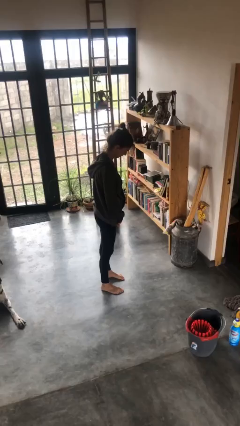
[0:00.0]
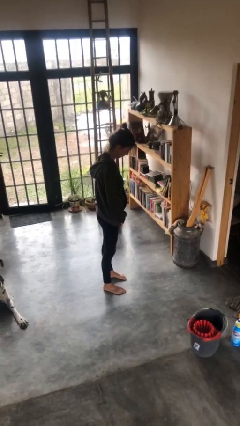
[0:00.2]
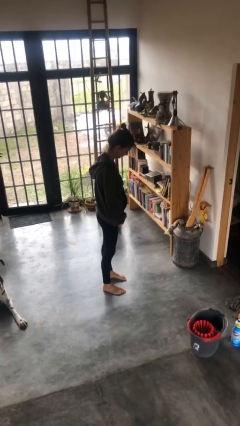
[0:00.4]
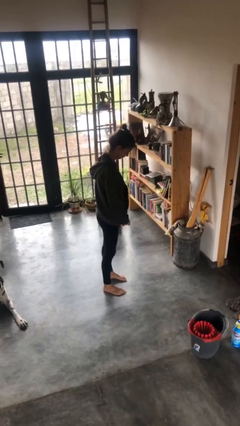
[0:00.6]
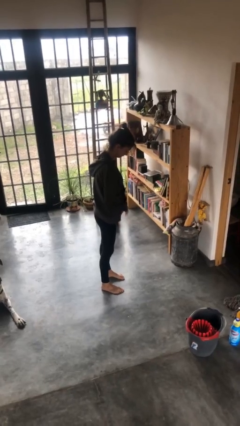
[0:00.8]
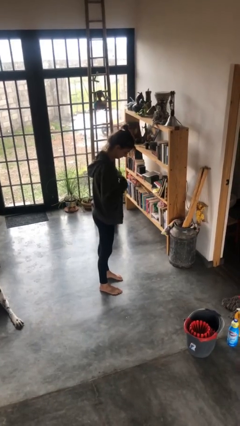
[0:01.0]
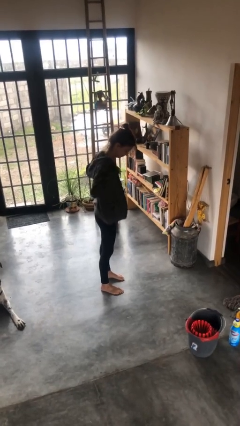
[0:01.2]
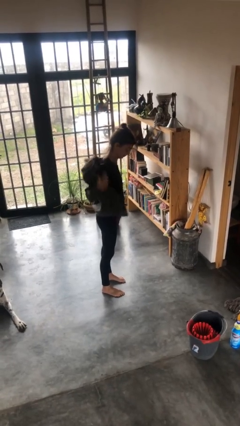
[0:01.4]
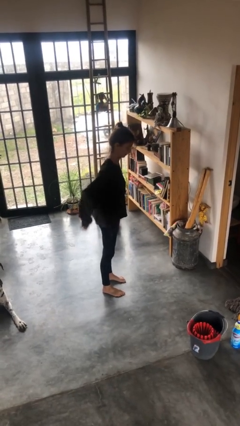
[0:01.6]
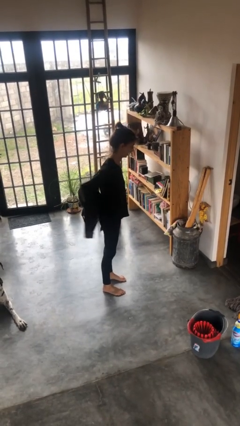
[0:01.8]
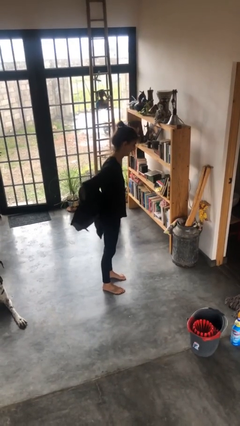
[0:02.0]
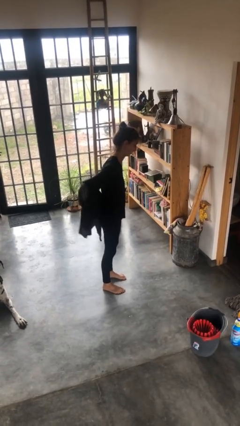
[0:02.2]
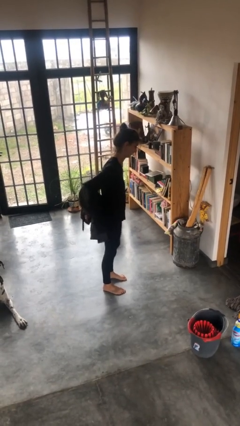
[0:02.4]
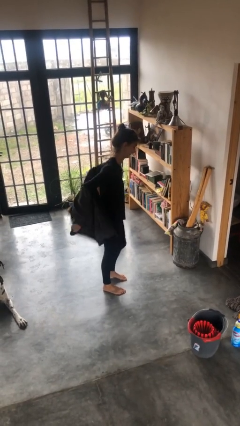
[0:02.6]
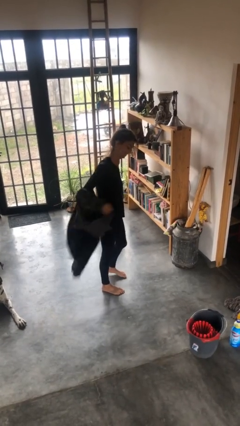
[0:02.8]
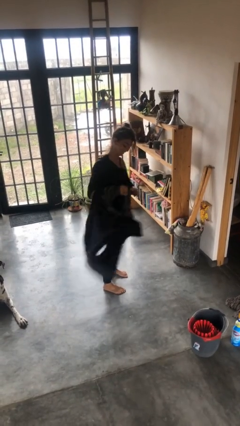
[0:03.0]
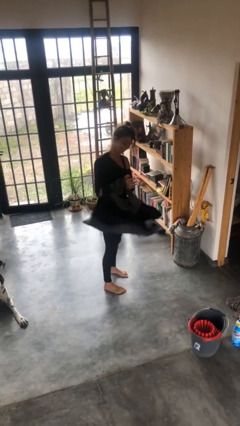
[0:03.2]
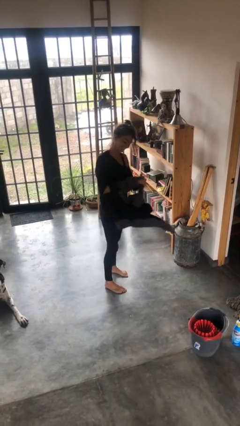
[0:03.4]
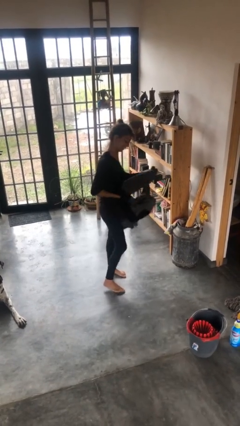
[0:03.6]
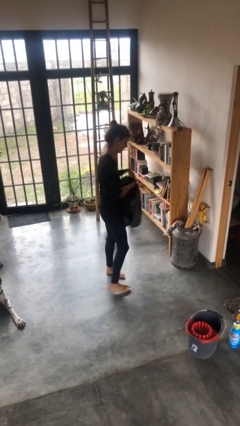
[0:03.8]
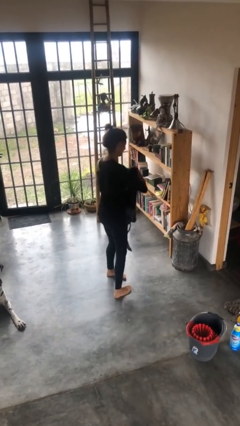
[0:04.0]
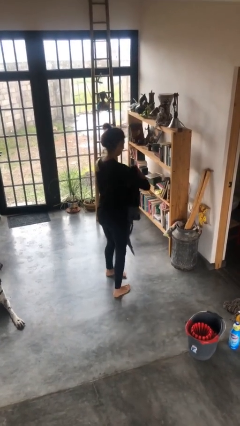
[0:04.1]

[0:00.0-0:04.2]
person takes off jacket

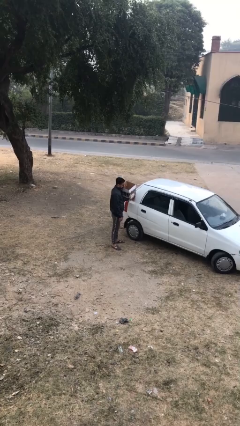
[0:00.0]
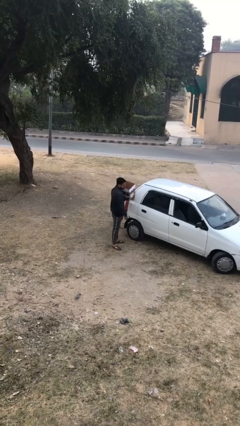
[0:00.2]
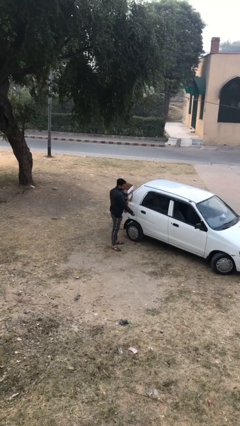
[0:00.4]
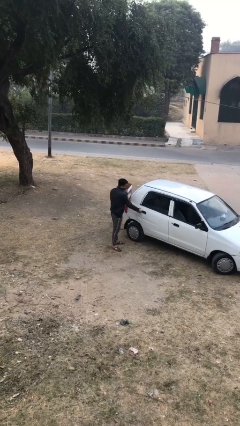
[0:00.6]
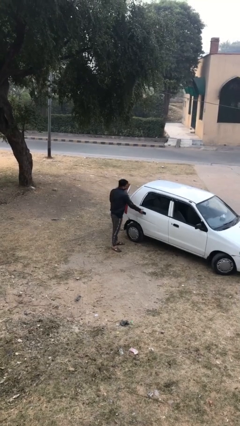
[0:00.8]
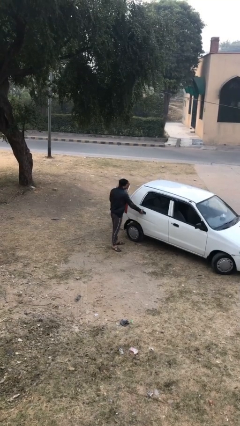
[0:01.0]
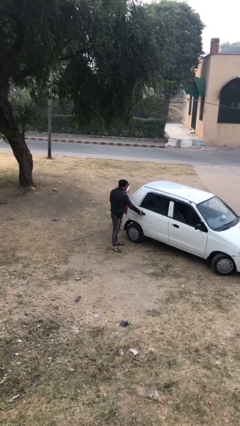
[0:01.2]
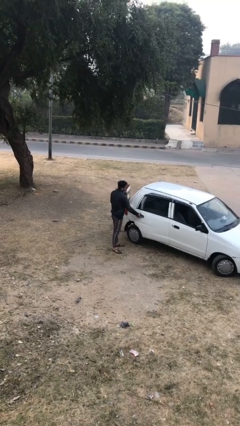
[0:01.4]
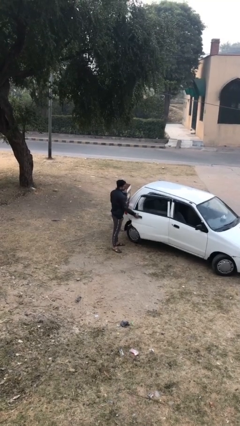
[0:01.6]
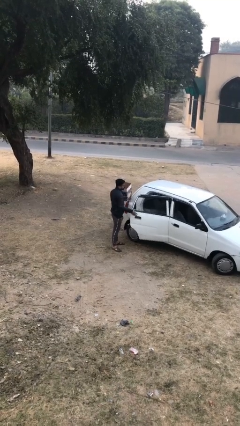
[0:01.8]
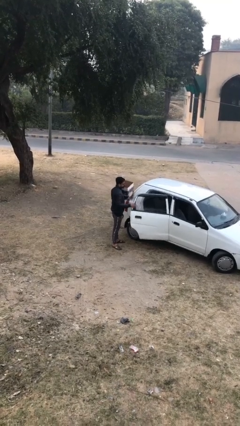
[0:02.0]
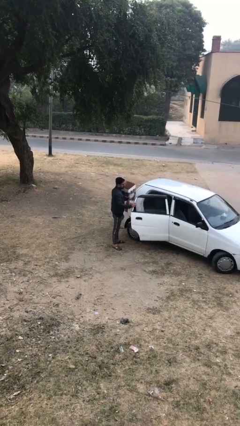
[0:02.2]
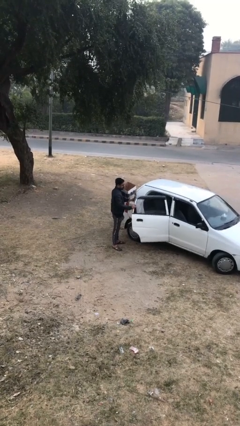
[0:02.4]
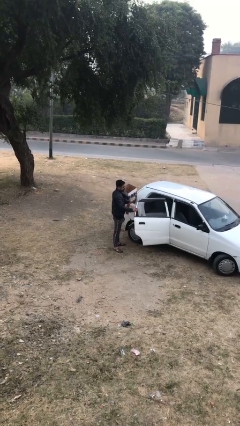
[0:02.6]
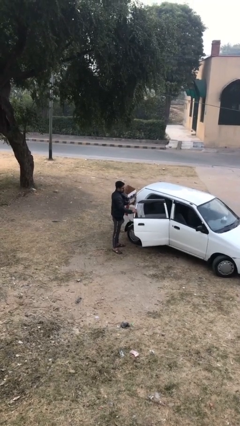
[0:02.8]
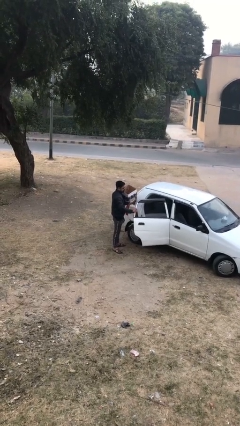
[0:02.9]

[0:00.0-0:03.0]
person opens car door

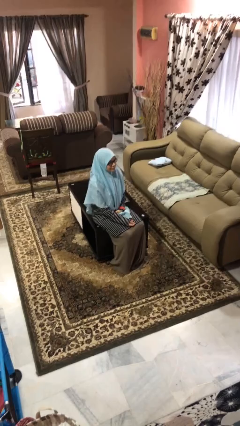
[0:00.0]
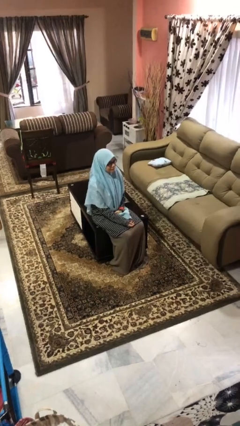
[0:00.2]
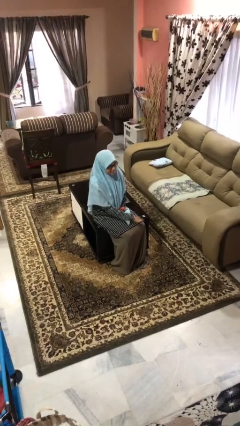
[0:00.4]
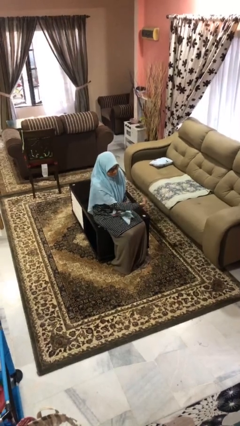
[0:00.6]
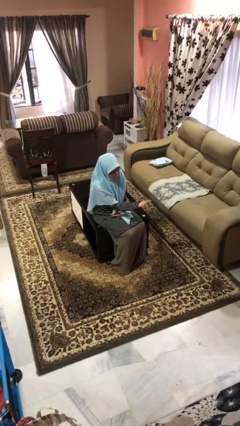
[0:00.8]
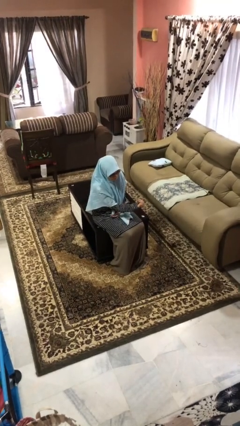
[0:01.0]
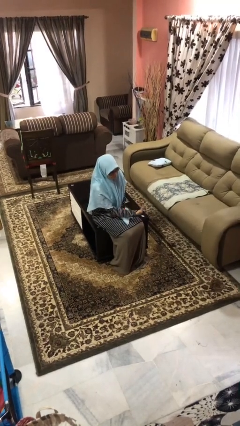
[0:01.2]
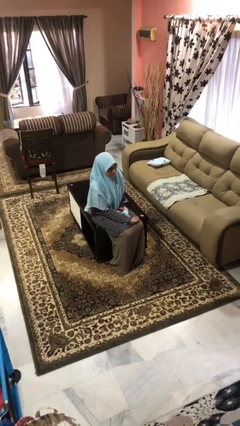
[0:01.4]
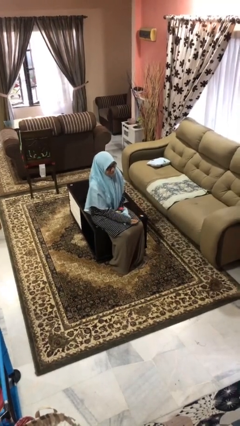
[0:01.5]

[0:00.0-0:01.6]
person gestures come here

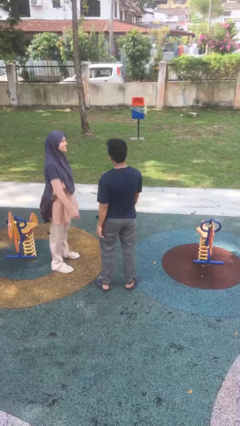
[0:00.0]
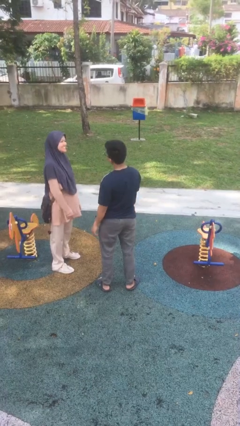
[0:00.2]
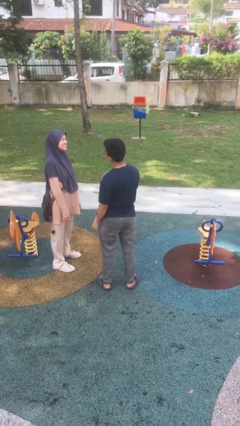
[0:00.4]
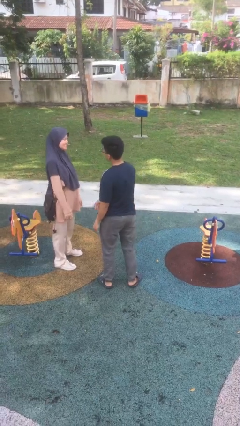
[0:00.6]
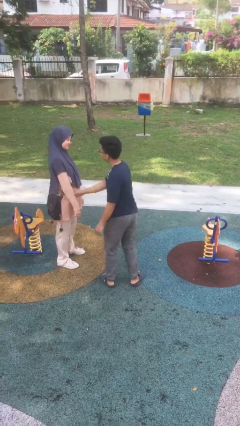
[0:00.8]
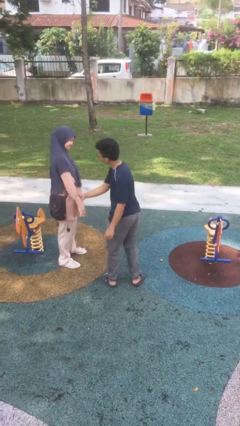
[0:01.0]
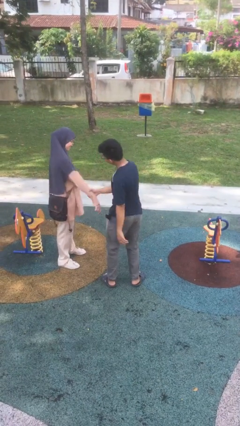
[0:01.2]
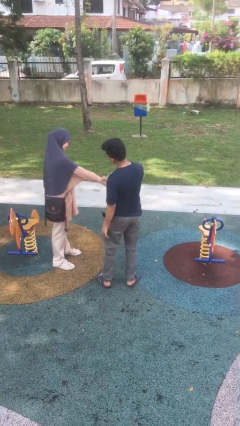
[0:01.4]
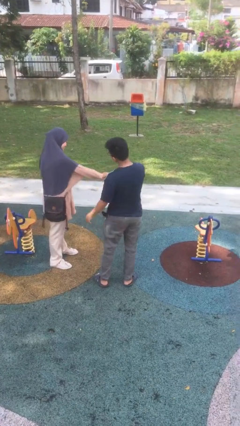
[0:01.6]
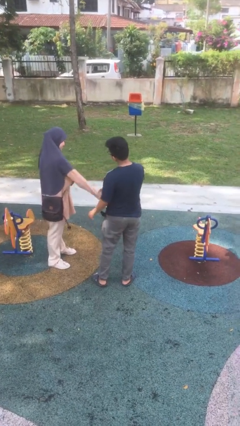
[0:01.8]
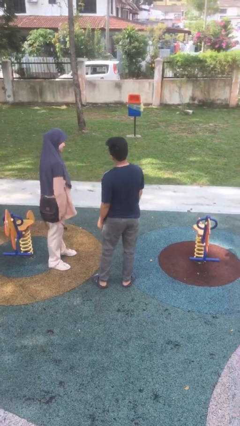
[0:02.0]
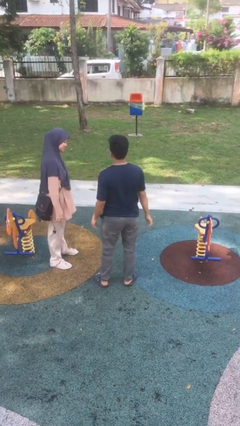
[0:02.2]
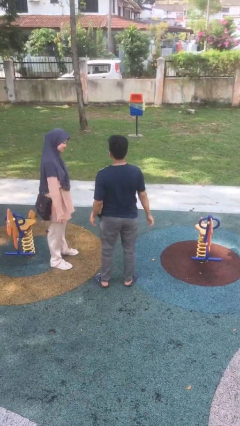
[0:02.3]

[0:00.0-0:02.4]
person grabs person by forearm

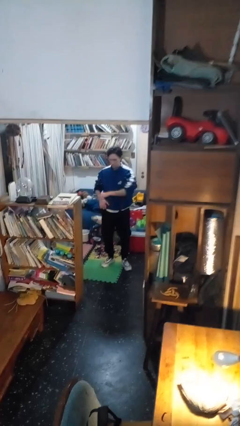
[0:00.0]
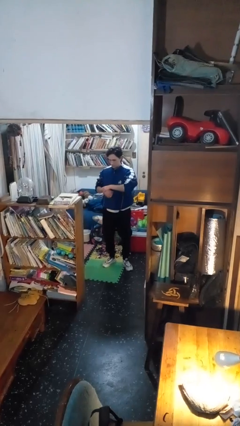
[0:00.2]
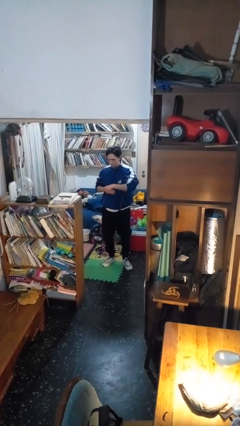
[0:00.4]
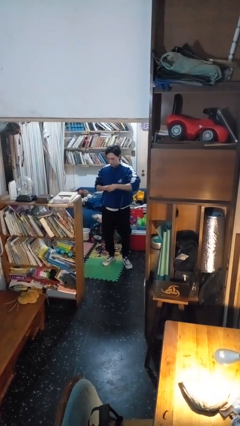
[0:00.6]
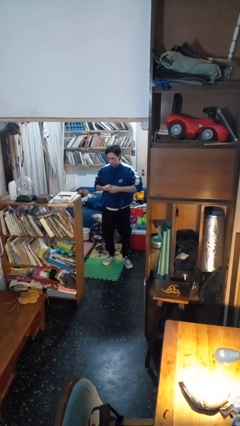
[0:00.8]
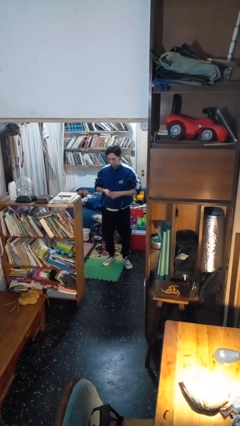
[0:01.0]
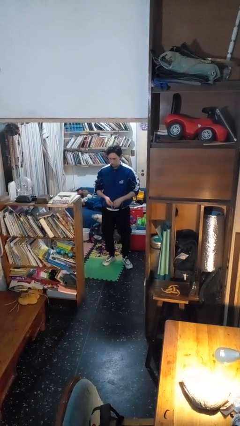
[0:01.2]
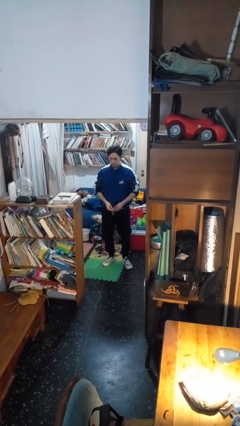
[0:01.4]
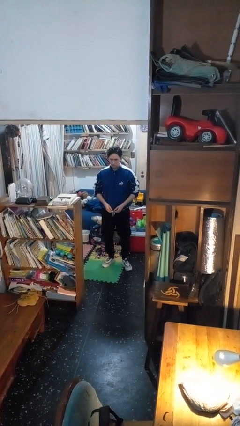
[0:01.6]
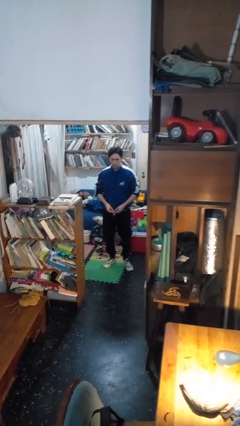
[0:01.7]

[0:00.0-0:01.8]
person takes off wristwatch

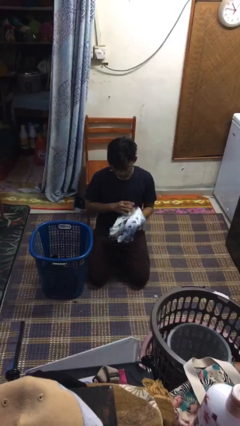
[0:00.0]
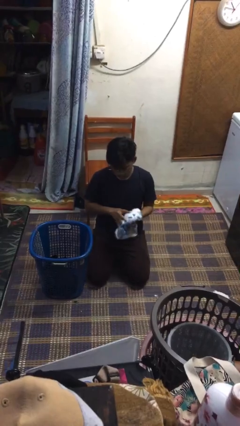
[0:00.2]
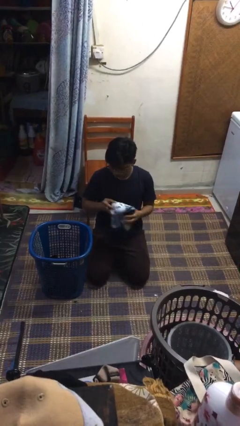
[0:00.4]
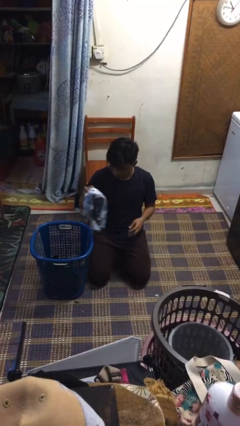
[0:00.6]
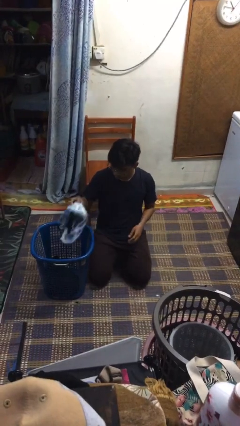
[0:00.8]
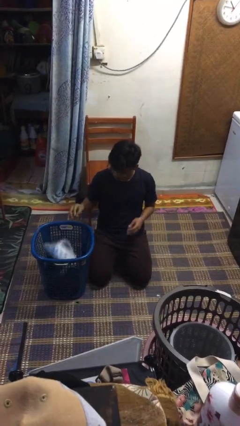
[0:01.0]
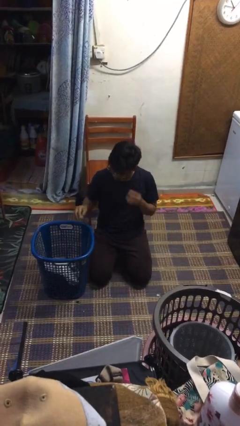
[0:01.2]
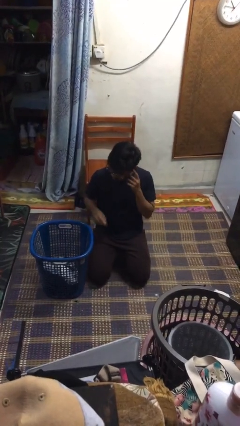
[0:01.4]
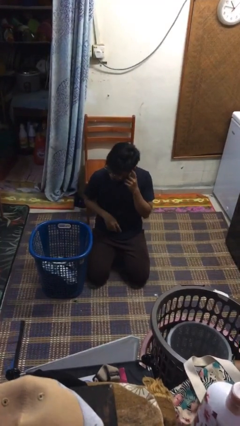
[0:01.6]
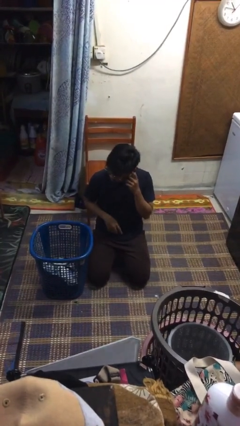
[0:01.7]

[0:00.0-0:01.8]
person puts object into basket

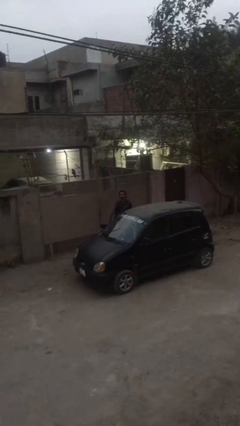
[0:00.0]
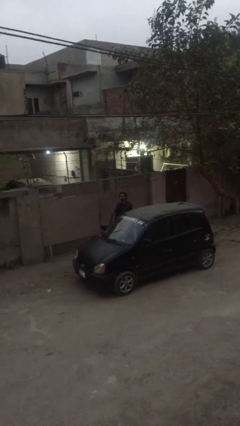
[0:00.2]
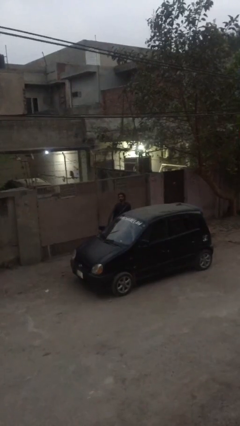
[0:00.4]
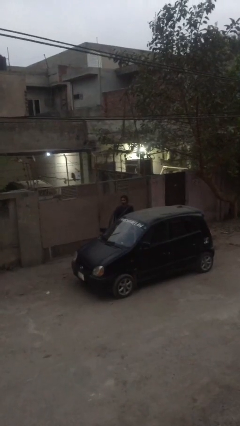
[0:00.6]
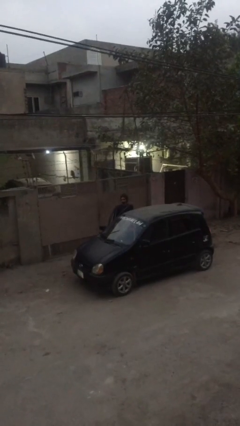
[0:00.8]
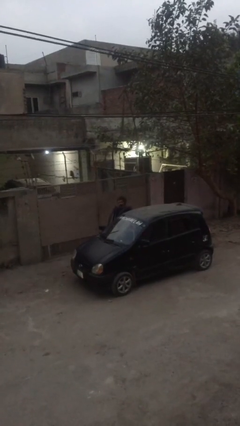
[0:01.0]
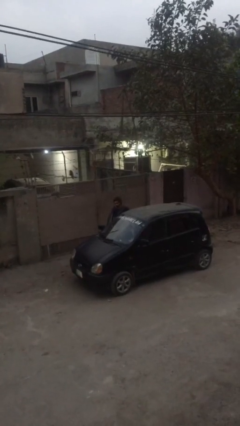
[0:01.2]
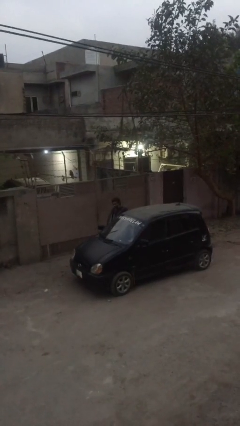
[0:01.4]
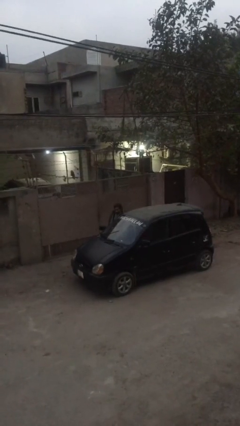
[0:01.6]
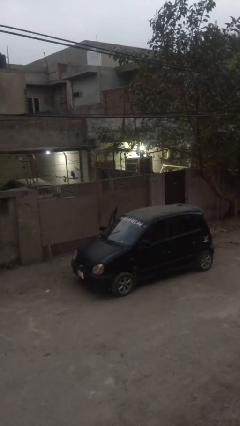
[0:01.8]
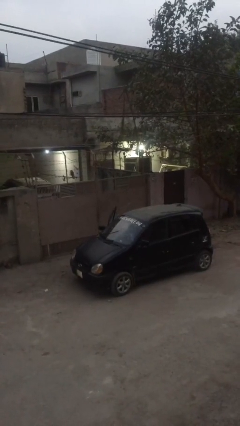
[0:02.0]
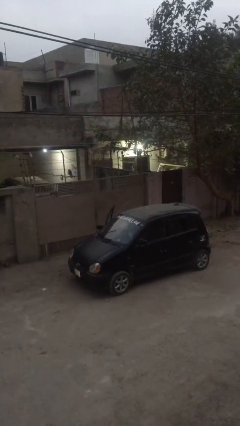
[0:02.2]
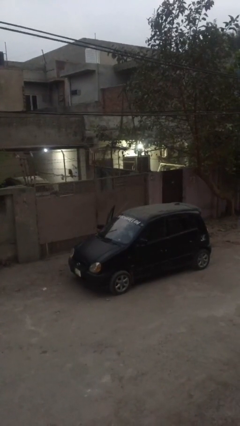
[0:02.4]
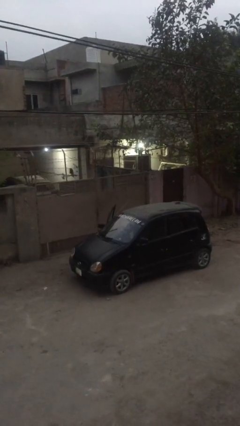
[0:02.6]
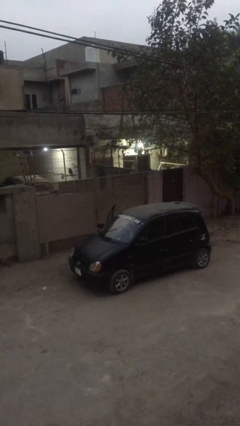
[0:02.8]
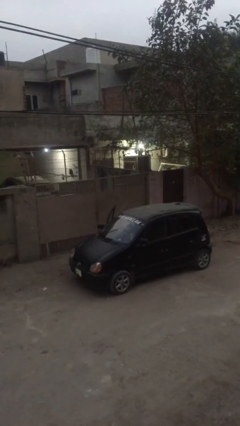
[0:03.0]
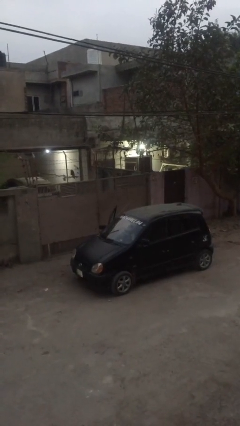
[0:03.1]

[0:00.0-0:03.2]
person enters car
